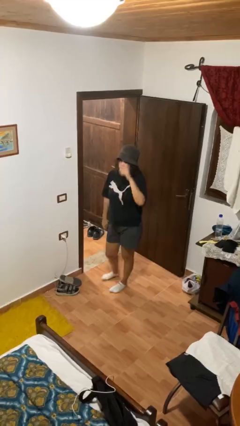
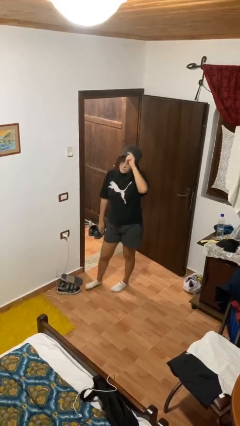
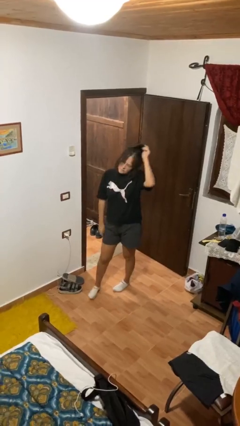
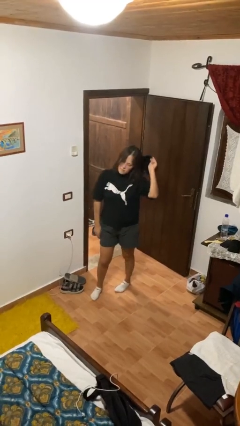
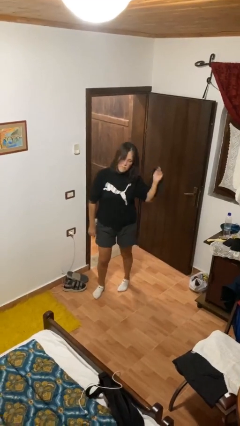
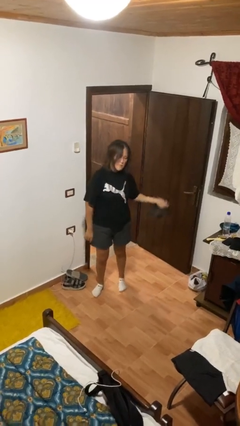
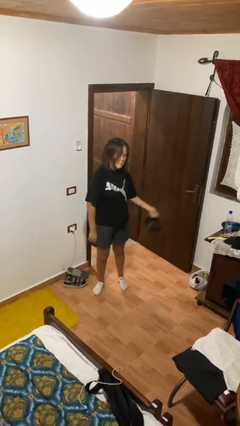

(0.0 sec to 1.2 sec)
person takes off hat

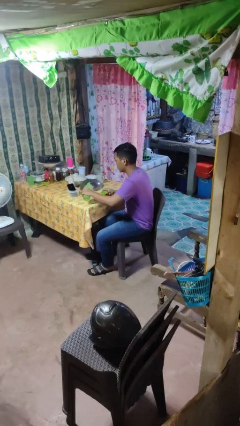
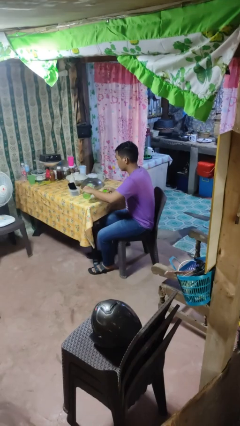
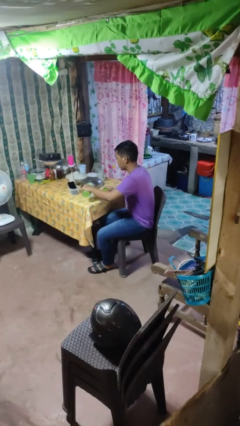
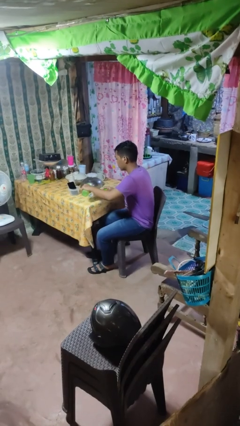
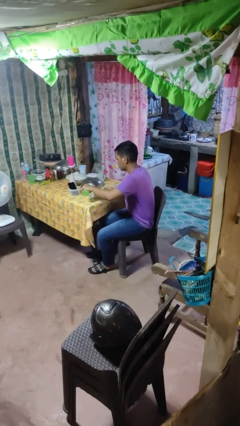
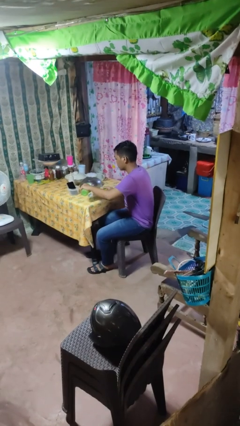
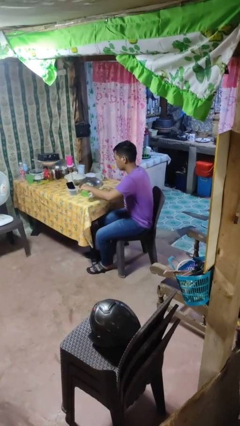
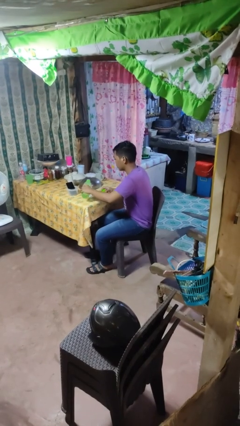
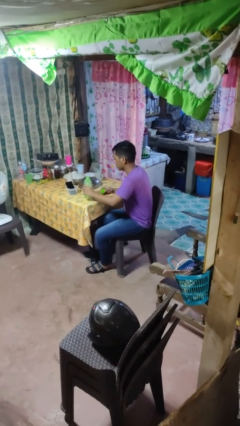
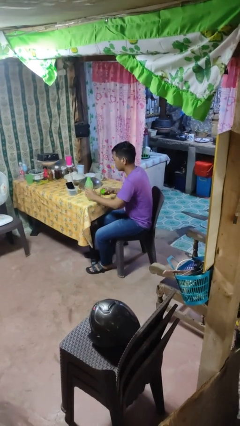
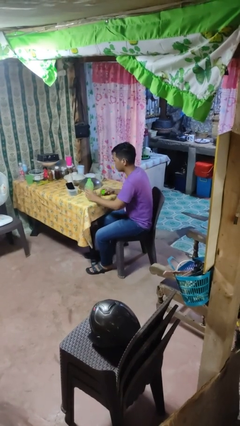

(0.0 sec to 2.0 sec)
person pours liquid into cup

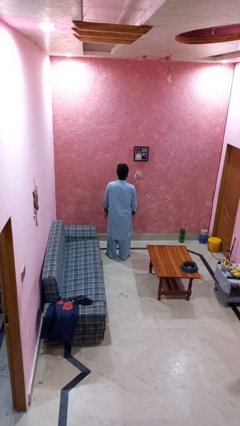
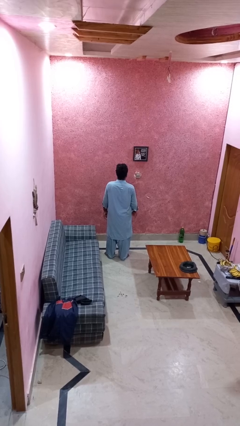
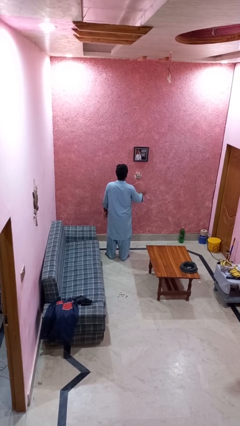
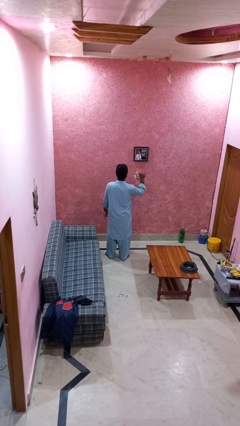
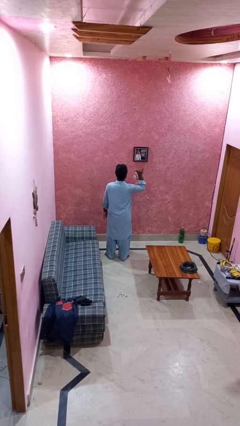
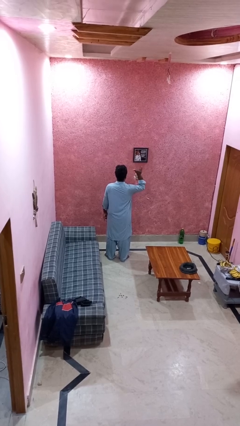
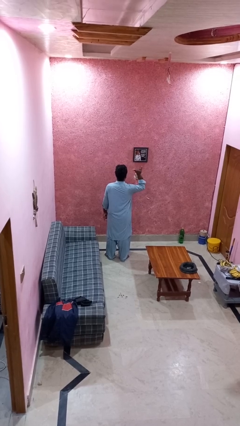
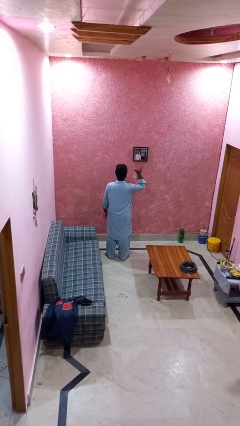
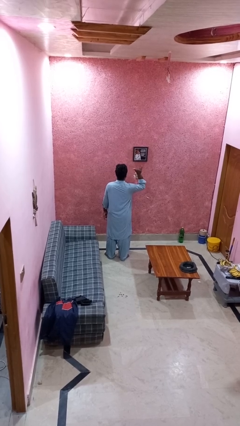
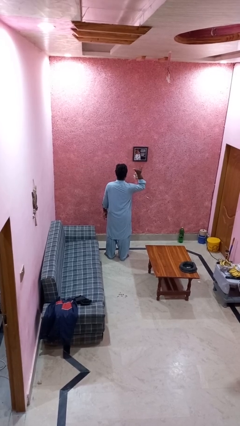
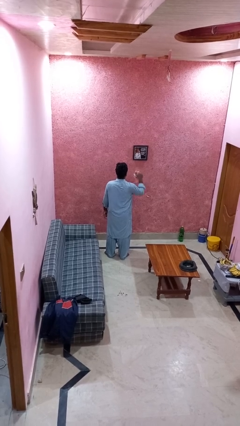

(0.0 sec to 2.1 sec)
person gestures hang loose

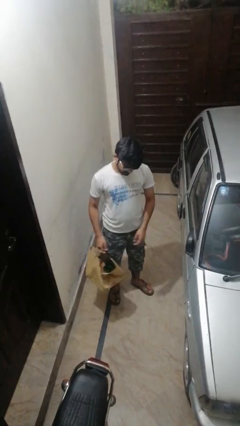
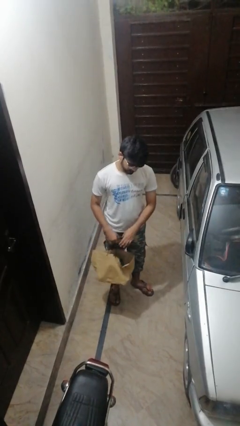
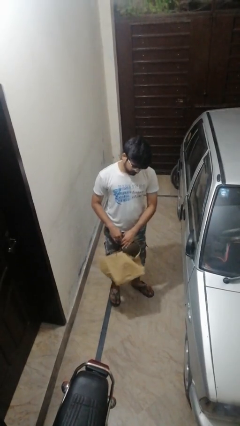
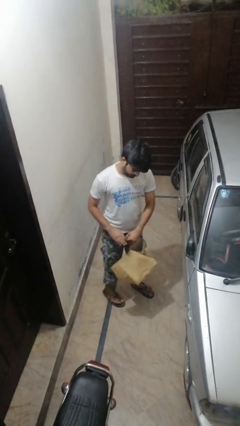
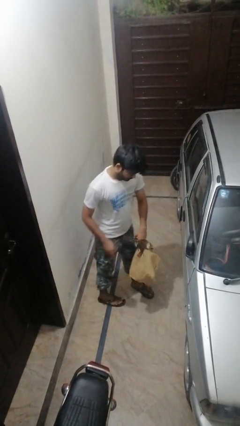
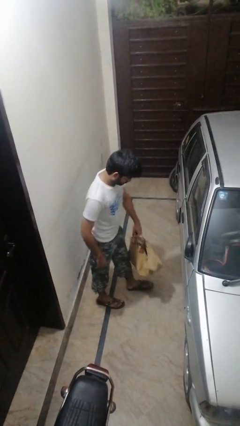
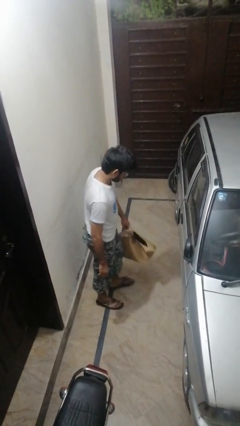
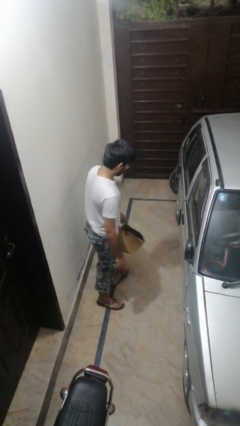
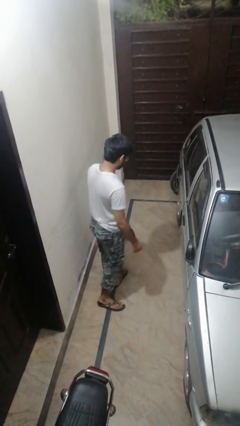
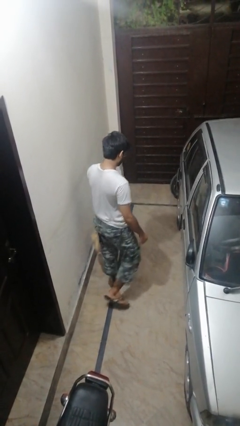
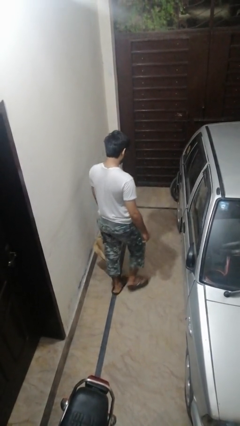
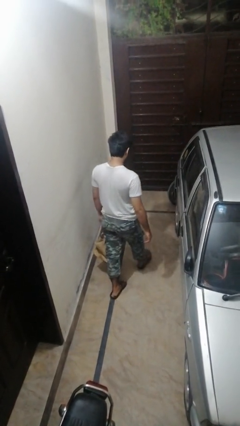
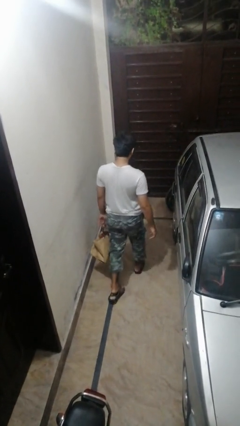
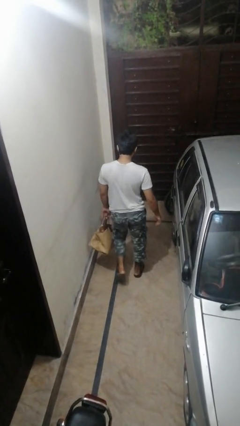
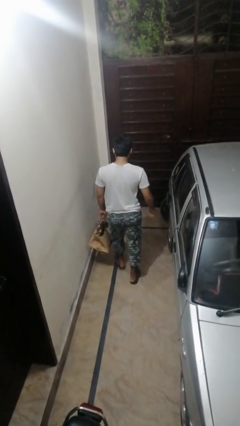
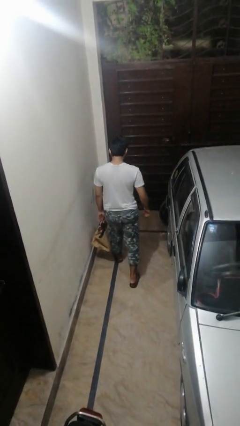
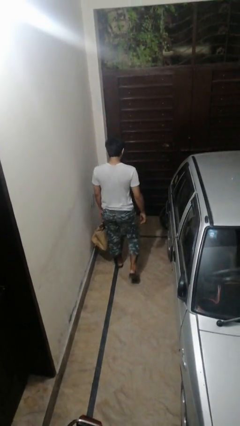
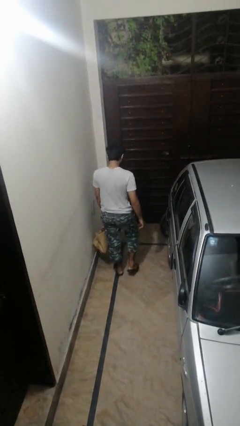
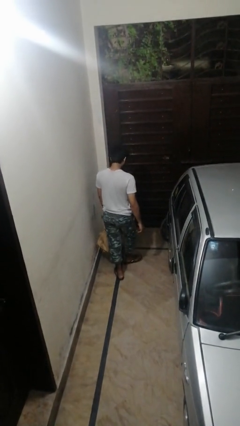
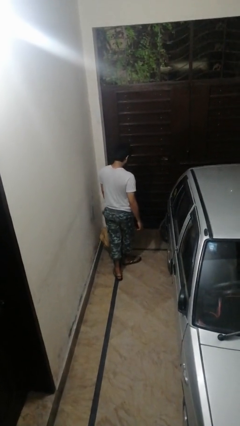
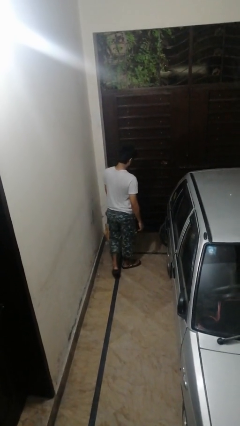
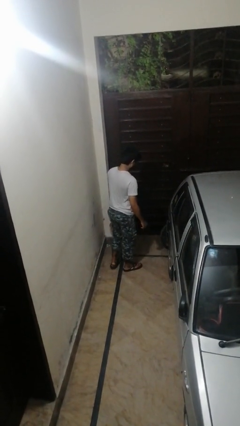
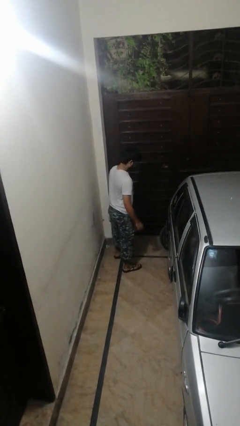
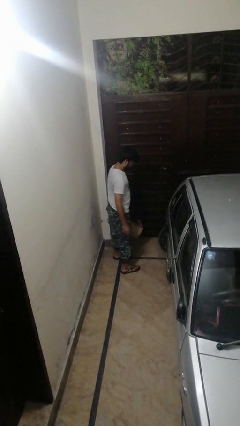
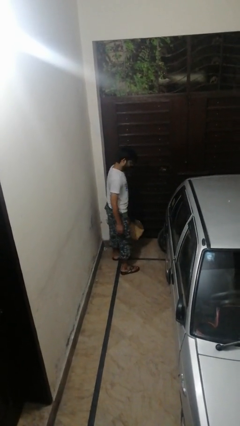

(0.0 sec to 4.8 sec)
person carries groceries

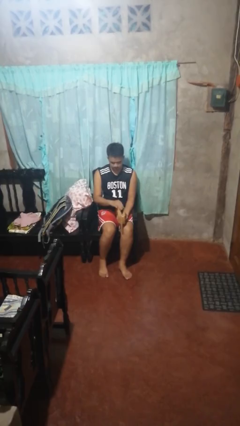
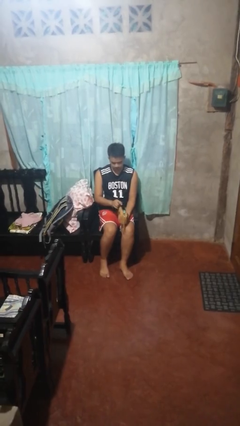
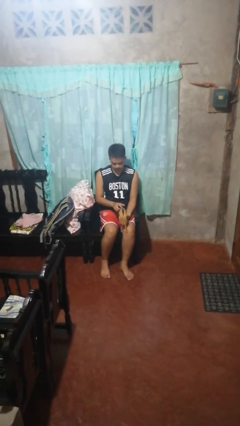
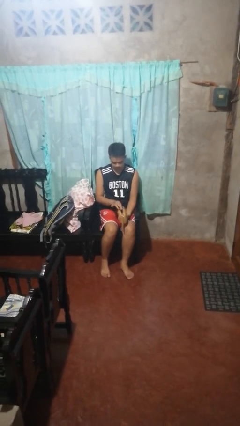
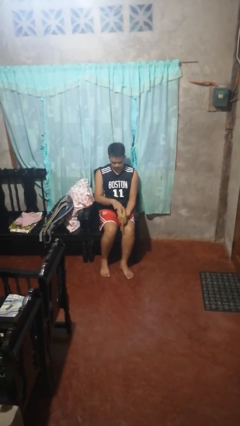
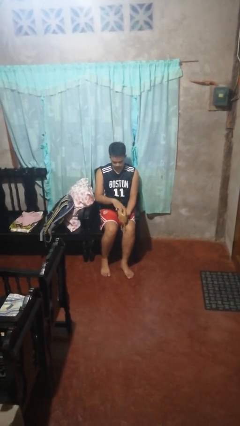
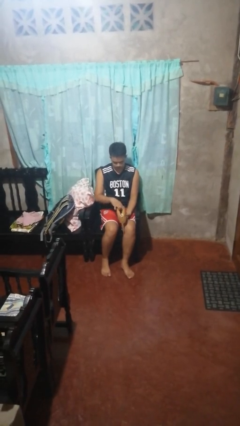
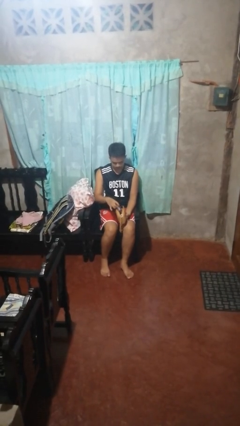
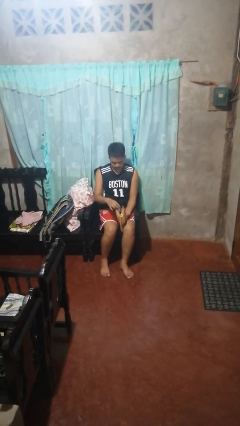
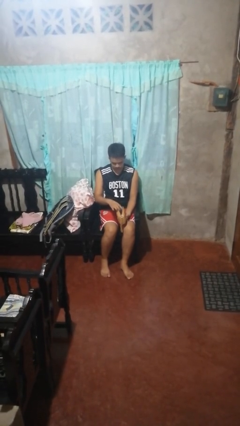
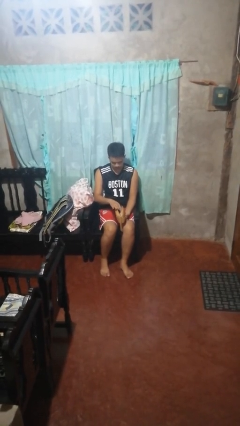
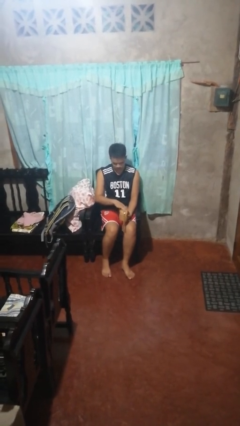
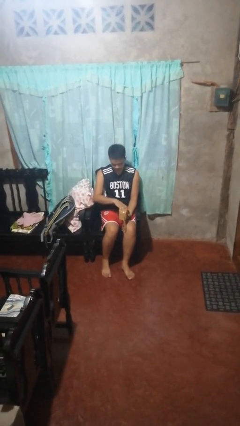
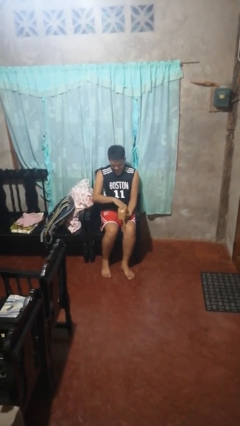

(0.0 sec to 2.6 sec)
person searches in purse

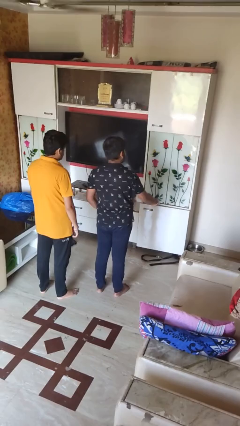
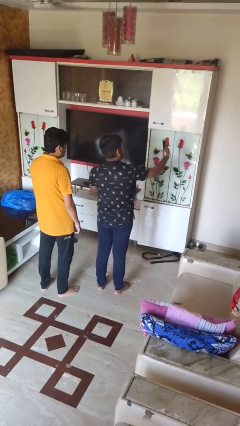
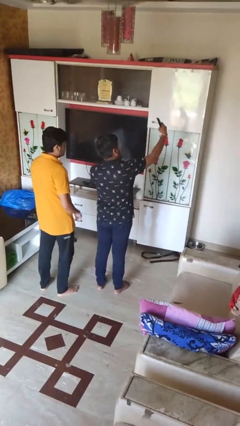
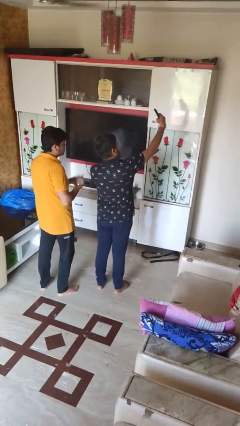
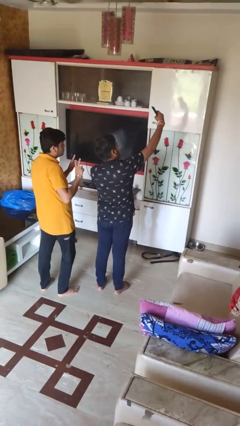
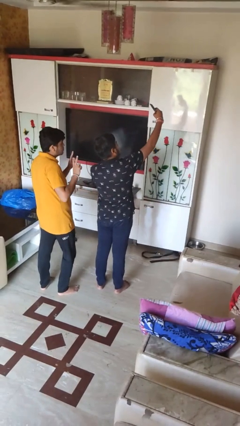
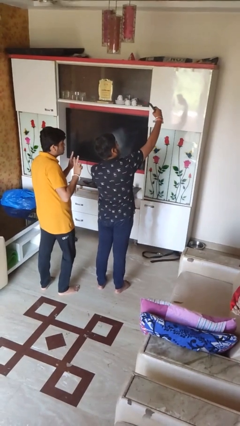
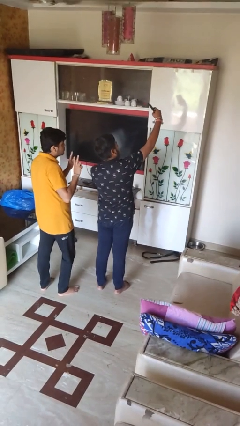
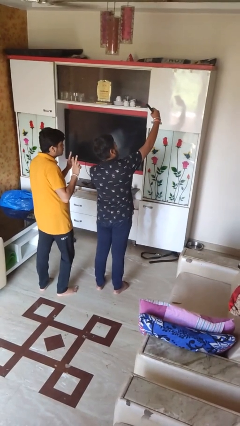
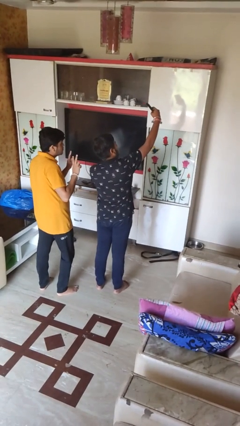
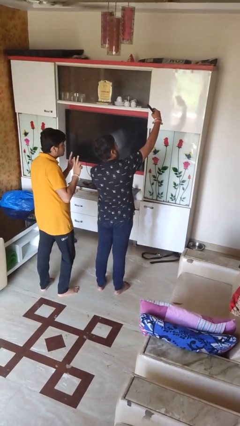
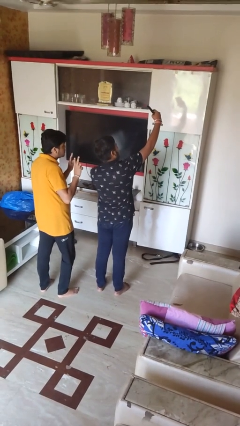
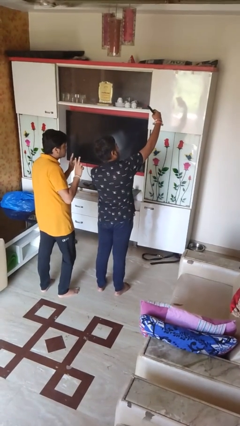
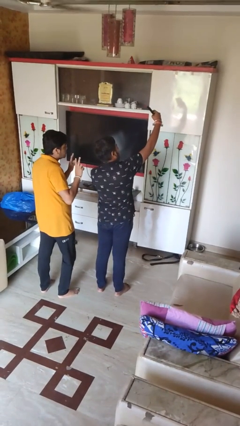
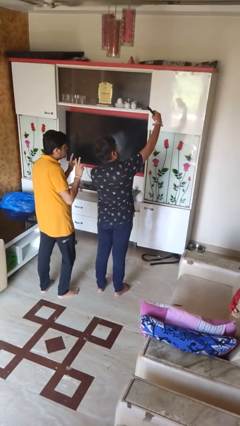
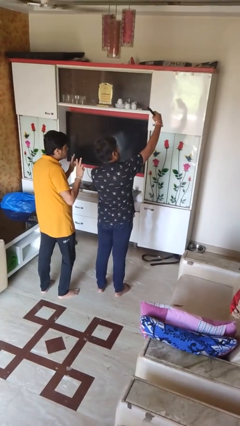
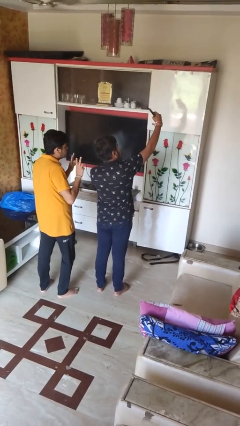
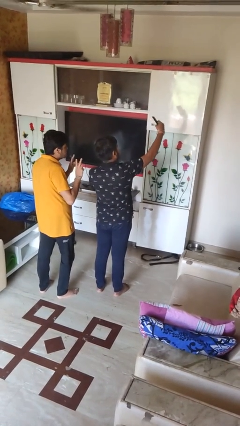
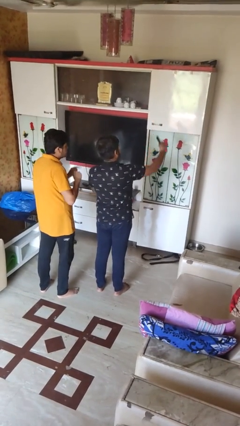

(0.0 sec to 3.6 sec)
person takes selfie with person

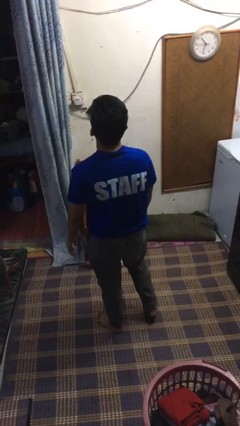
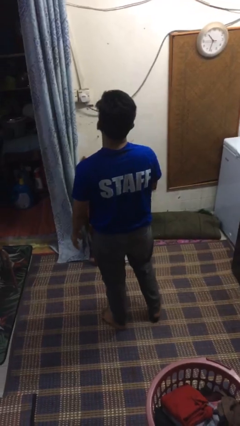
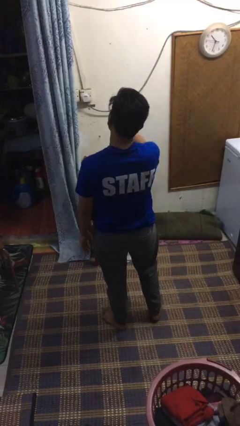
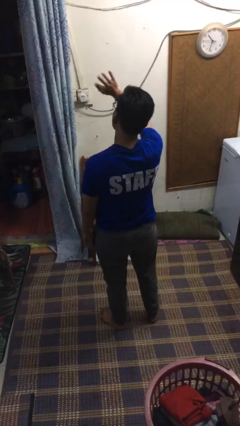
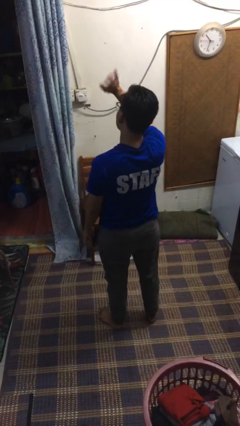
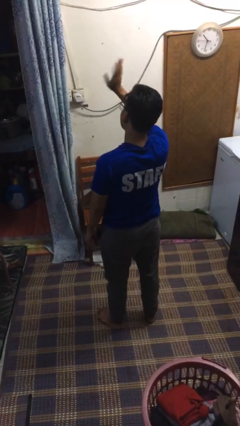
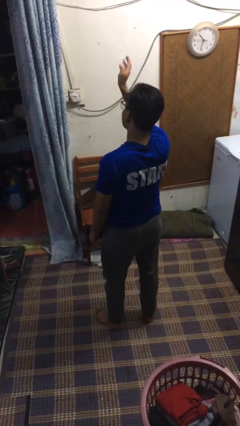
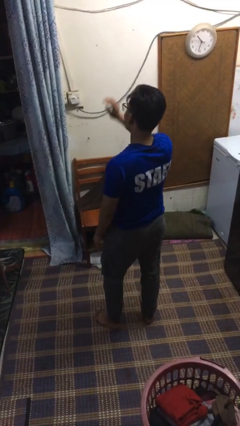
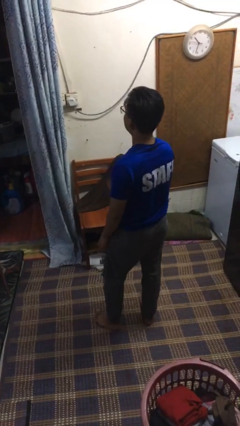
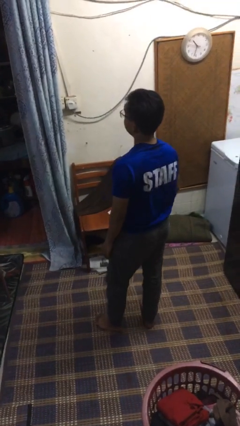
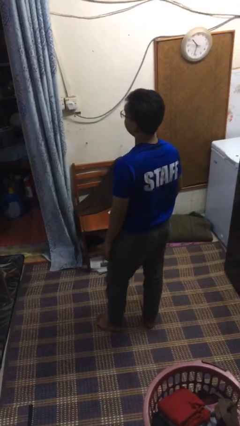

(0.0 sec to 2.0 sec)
person waves at person
